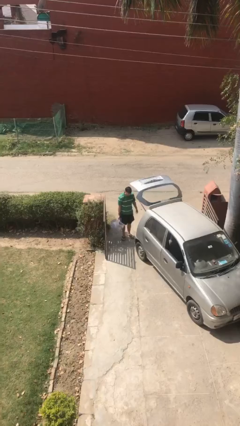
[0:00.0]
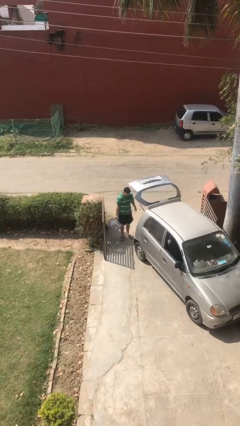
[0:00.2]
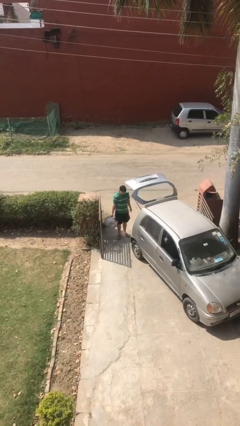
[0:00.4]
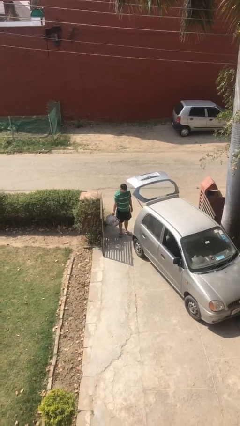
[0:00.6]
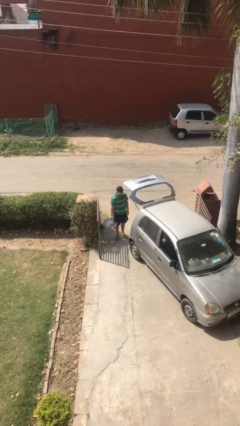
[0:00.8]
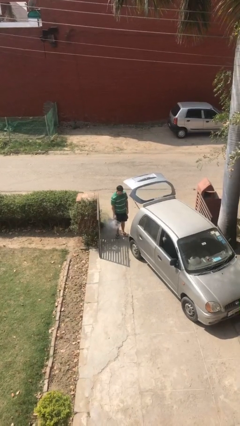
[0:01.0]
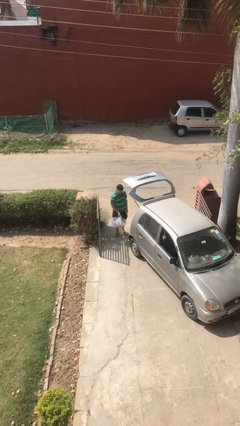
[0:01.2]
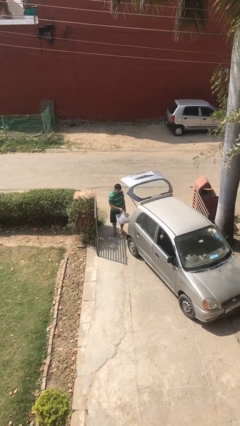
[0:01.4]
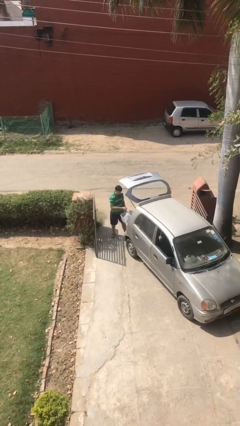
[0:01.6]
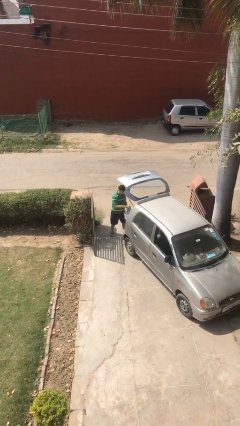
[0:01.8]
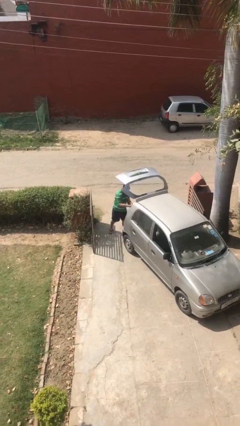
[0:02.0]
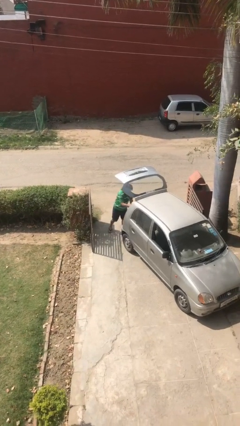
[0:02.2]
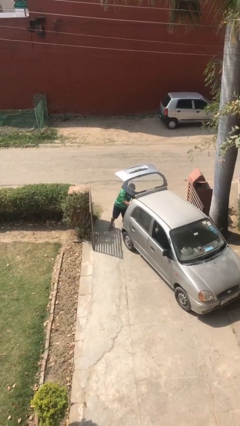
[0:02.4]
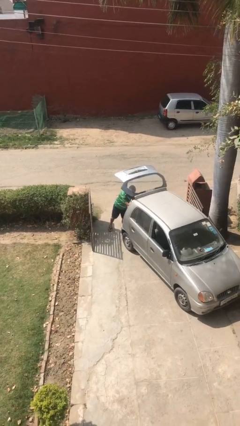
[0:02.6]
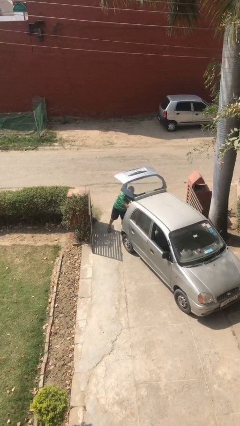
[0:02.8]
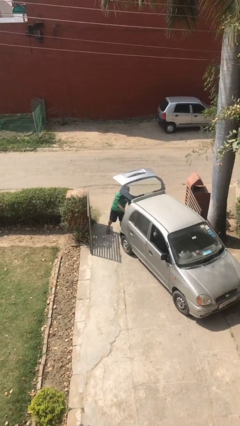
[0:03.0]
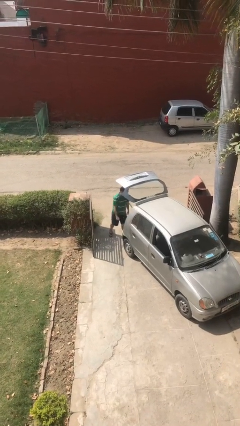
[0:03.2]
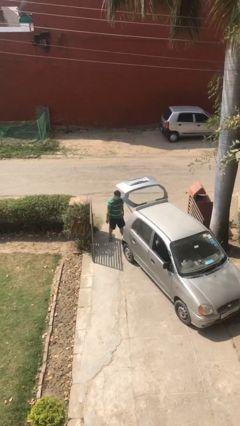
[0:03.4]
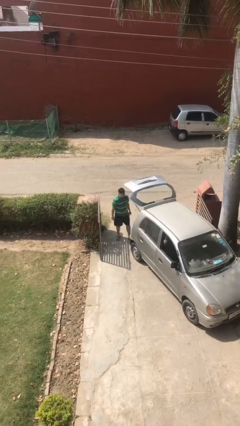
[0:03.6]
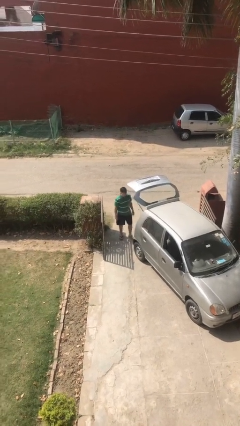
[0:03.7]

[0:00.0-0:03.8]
person loads car

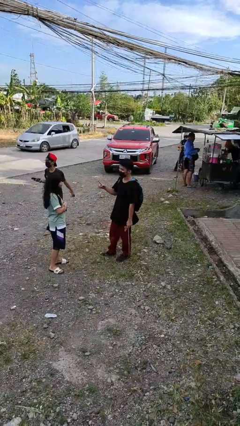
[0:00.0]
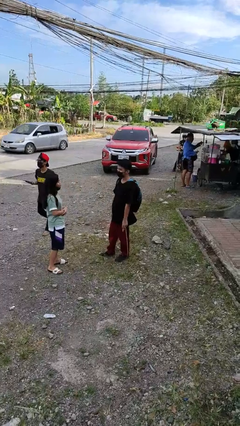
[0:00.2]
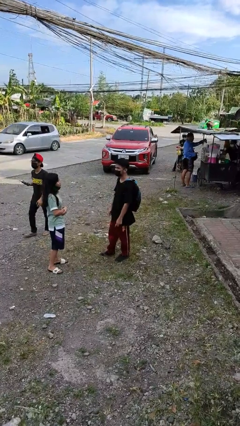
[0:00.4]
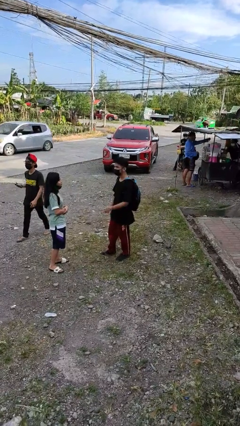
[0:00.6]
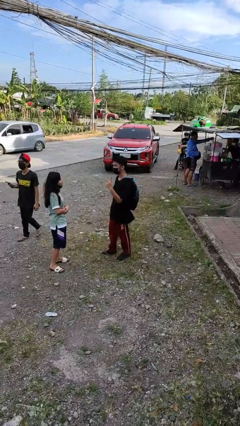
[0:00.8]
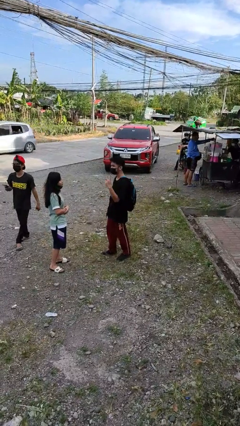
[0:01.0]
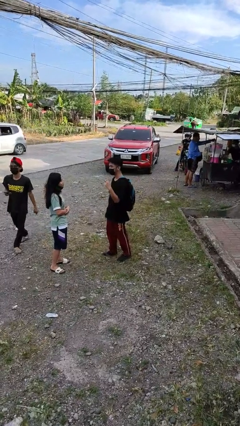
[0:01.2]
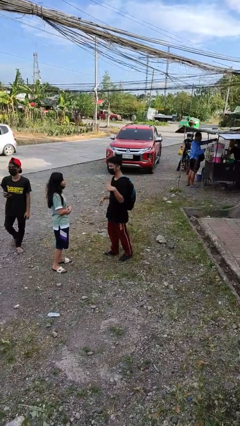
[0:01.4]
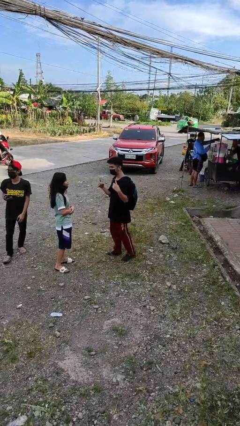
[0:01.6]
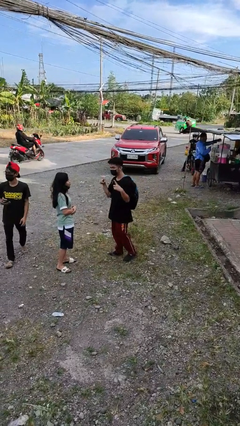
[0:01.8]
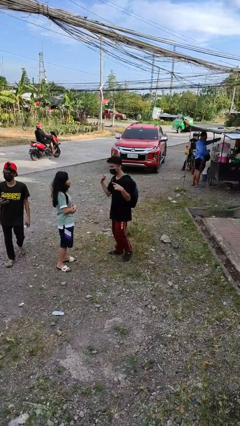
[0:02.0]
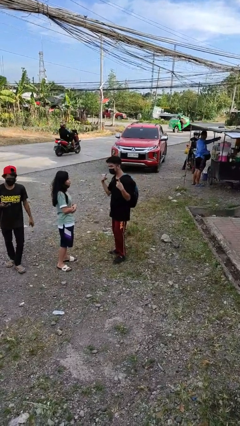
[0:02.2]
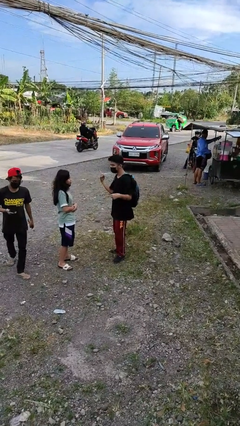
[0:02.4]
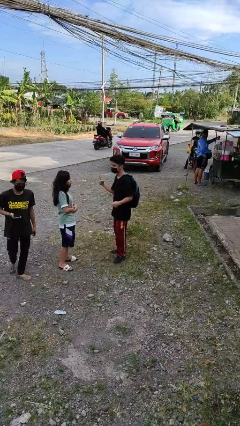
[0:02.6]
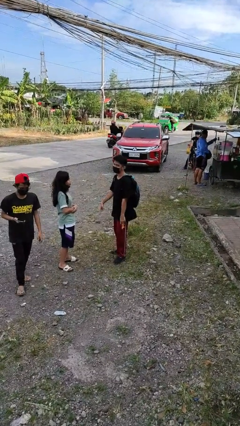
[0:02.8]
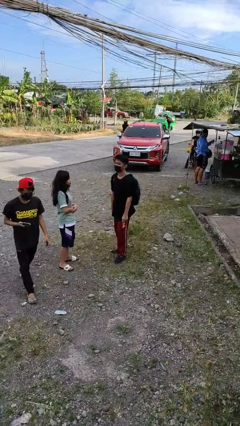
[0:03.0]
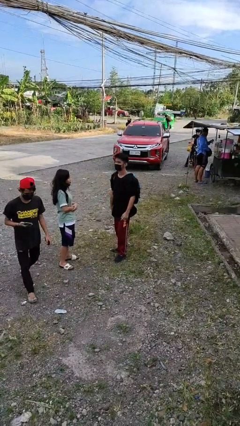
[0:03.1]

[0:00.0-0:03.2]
person talks to person

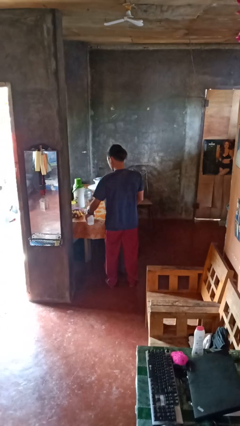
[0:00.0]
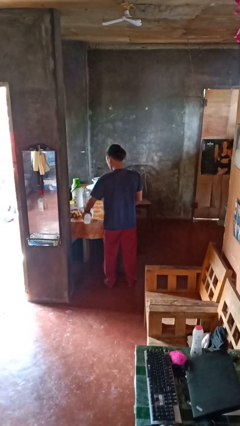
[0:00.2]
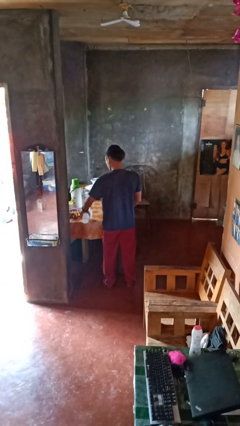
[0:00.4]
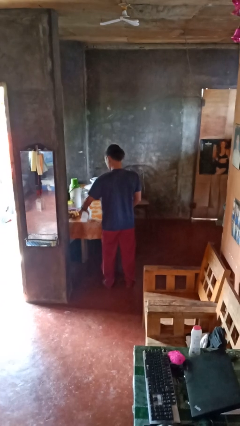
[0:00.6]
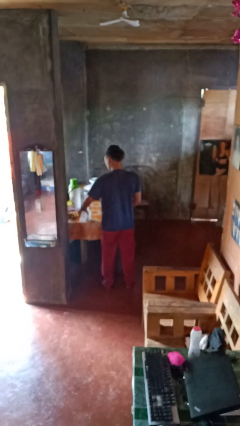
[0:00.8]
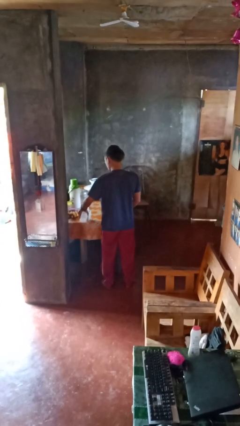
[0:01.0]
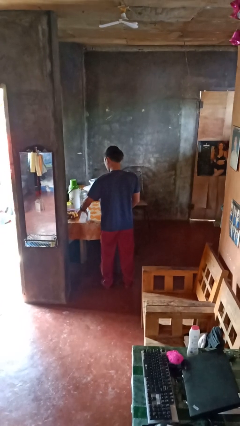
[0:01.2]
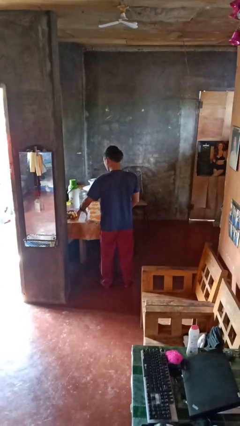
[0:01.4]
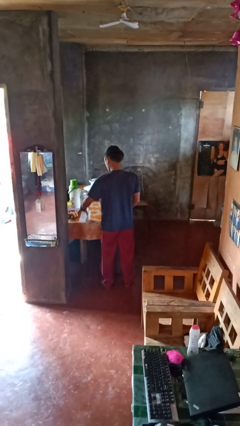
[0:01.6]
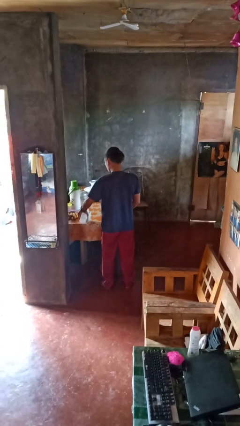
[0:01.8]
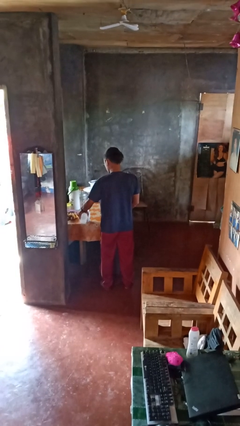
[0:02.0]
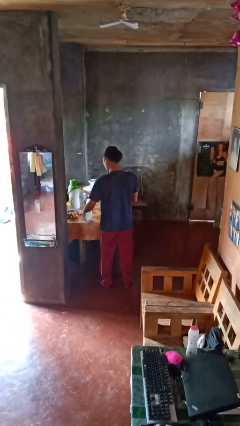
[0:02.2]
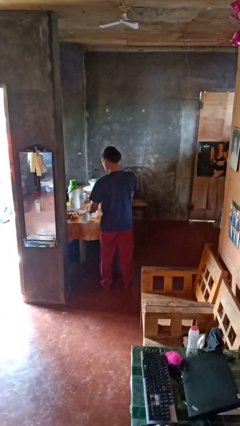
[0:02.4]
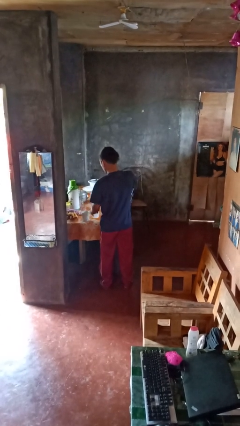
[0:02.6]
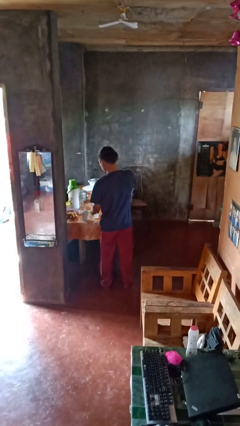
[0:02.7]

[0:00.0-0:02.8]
person pours liquid into cup

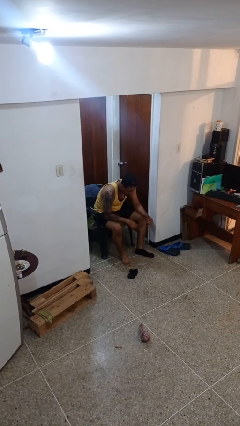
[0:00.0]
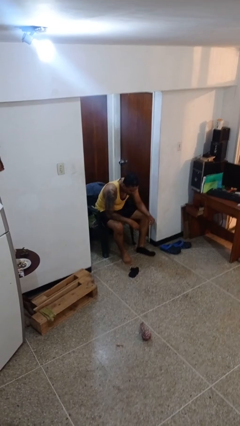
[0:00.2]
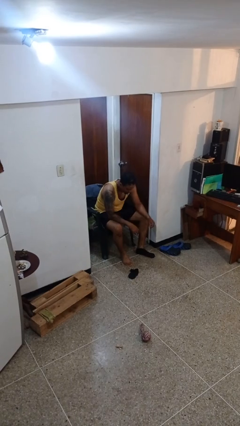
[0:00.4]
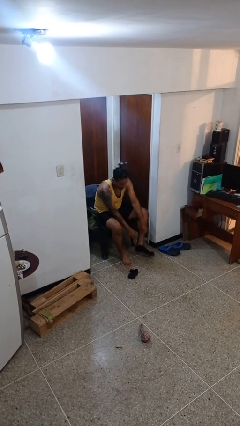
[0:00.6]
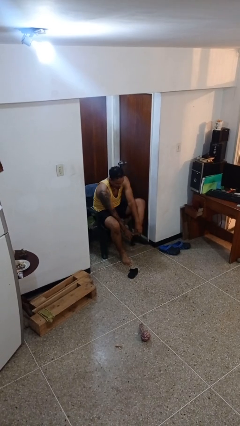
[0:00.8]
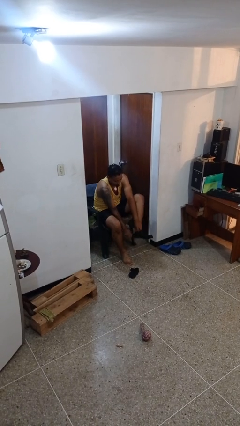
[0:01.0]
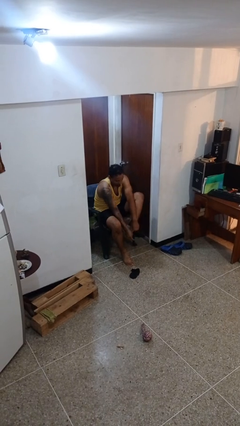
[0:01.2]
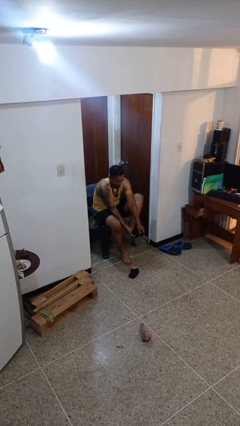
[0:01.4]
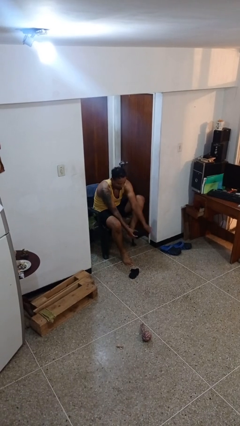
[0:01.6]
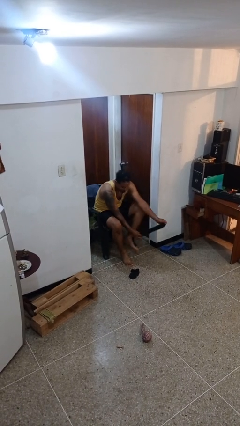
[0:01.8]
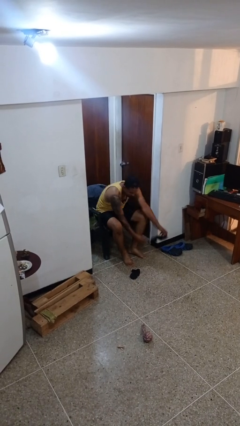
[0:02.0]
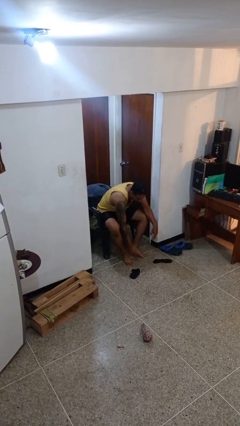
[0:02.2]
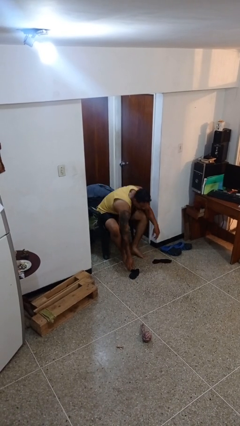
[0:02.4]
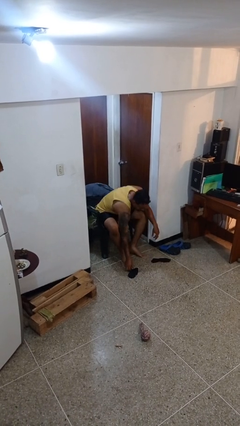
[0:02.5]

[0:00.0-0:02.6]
person takes off socks

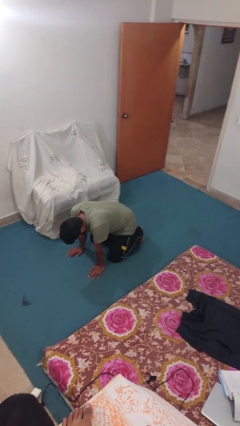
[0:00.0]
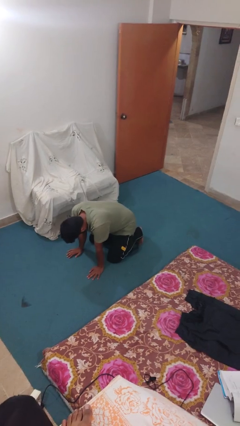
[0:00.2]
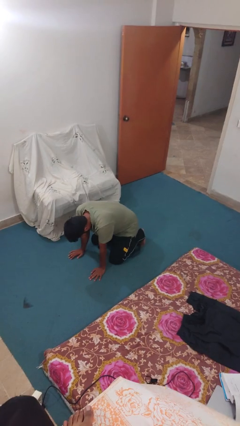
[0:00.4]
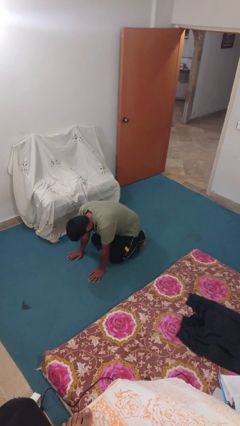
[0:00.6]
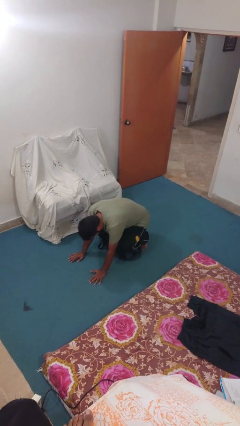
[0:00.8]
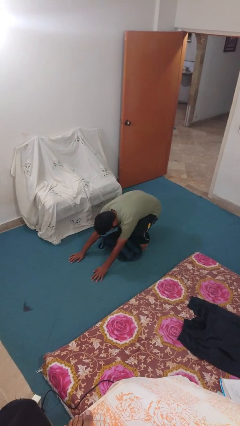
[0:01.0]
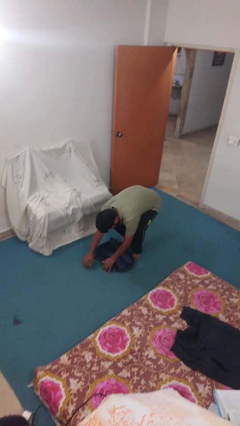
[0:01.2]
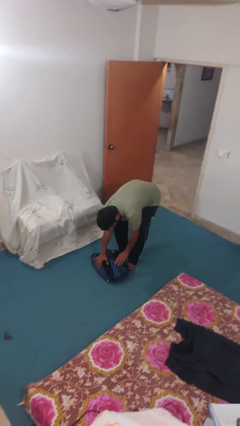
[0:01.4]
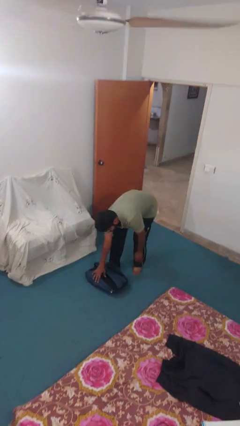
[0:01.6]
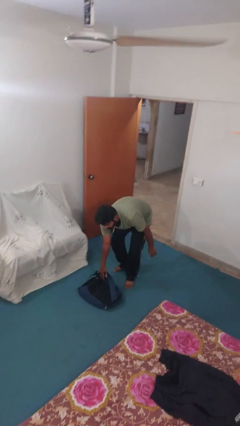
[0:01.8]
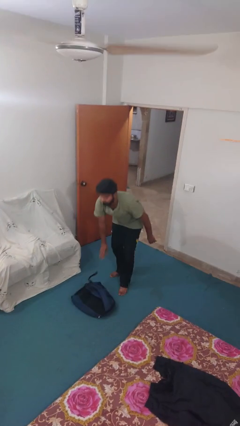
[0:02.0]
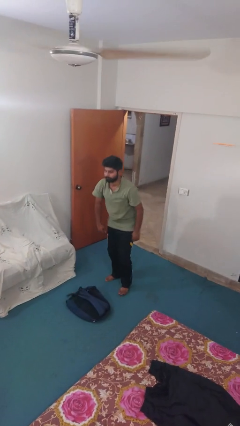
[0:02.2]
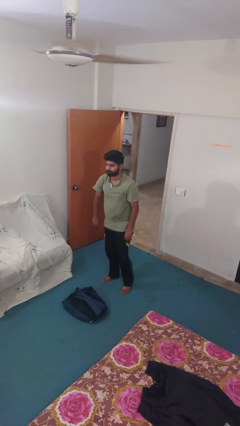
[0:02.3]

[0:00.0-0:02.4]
person stands up from floor

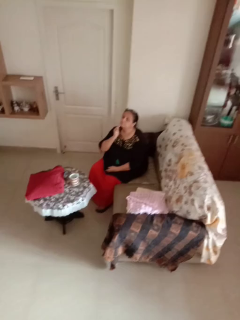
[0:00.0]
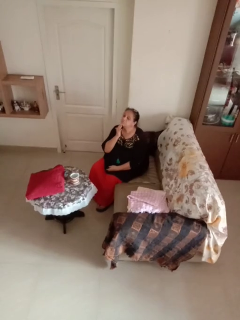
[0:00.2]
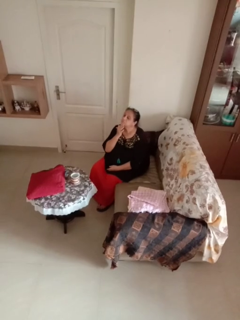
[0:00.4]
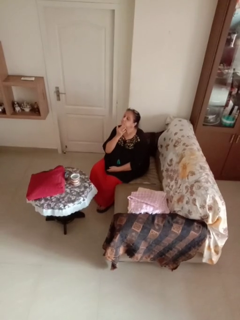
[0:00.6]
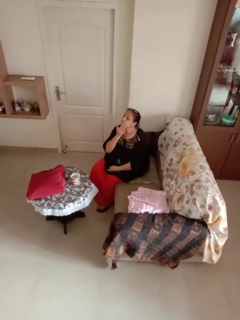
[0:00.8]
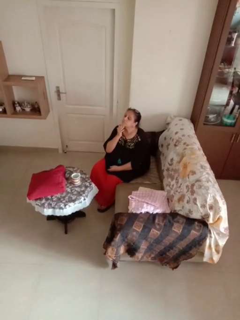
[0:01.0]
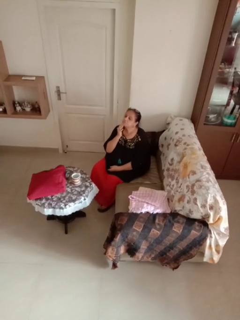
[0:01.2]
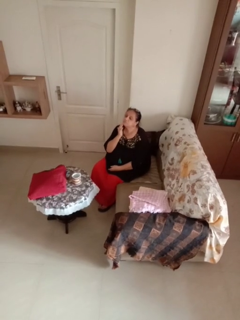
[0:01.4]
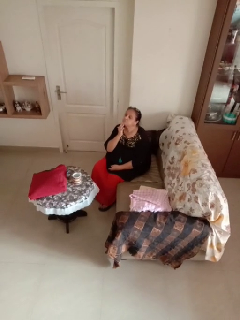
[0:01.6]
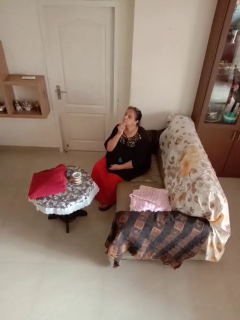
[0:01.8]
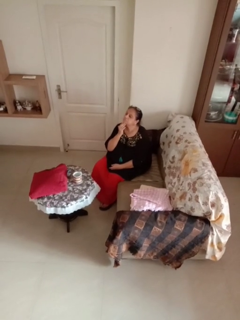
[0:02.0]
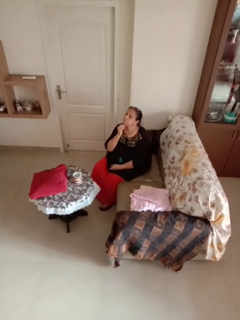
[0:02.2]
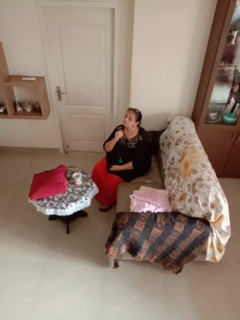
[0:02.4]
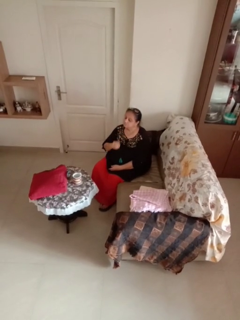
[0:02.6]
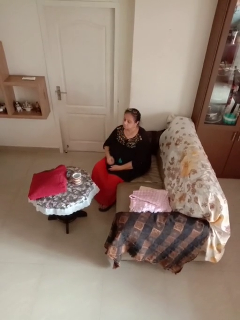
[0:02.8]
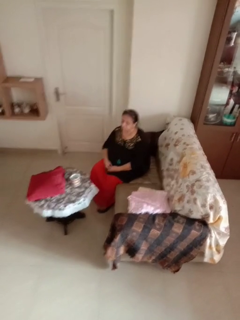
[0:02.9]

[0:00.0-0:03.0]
person strokes chin

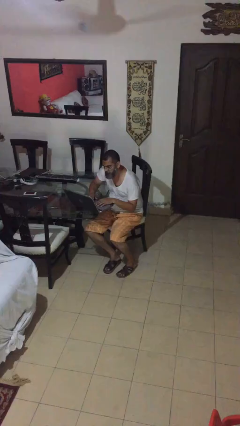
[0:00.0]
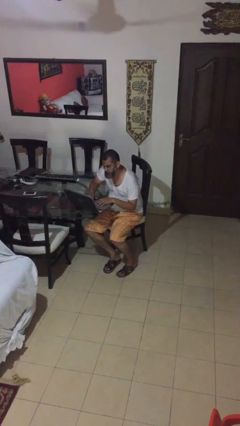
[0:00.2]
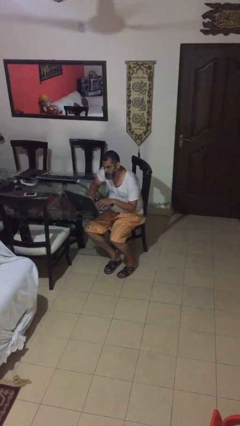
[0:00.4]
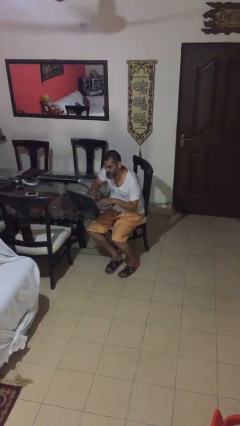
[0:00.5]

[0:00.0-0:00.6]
person interacts with laptop
